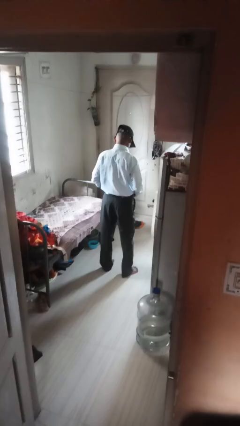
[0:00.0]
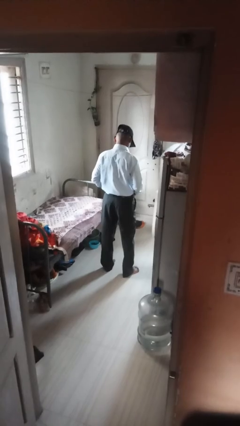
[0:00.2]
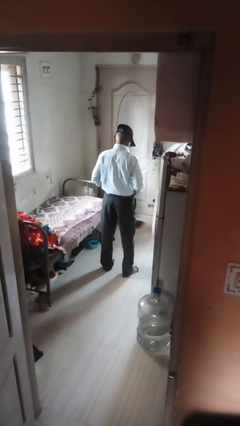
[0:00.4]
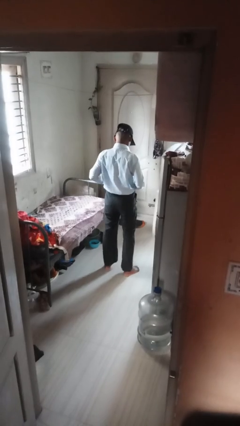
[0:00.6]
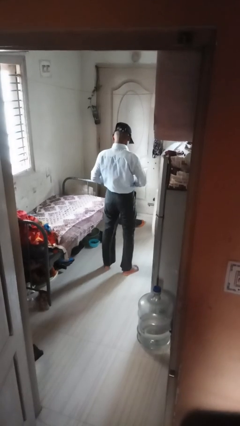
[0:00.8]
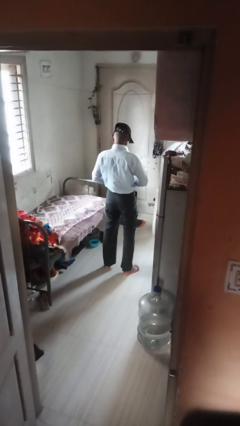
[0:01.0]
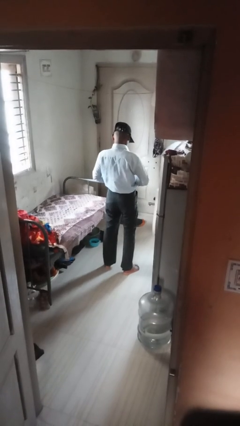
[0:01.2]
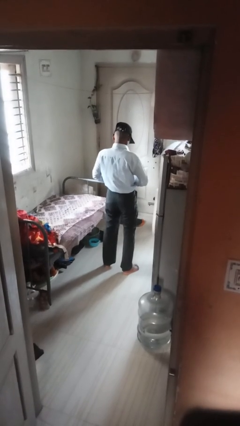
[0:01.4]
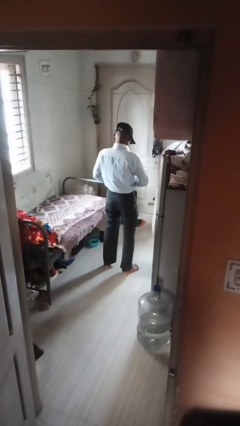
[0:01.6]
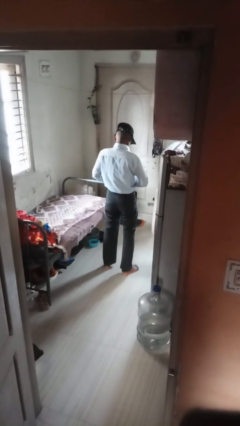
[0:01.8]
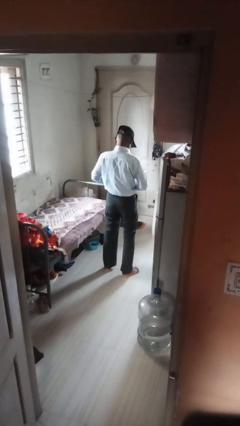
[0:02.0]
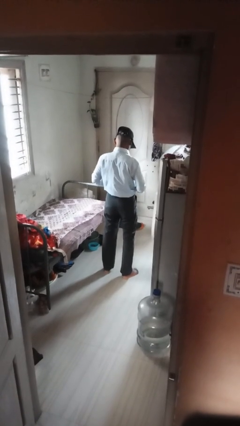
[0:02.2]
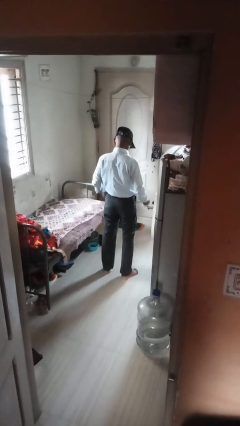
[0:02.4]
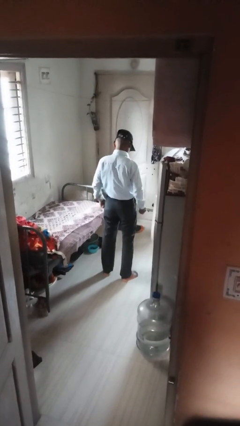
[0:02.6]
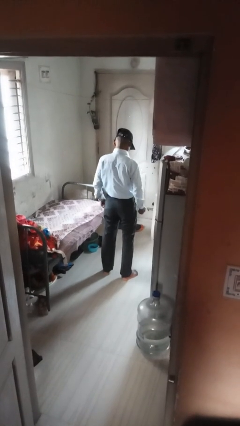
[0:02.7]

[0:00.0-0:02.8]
person hikes up pants

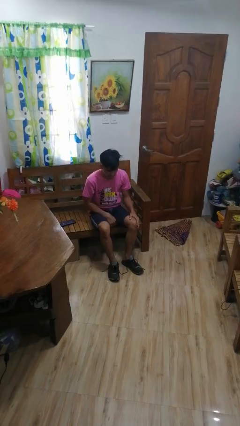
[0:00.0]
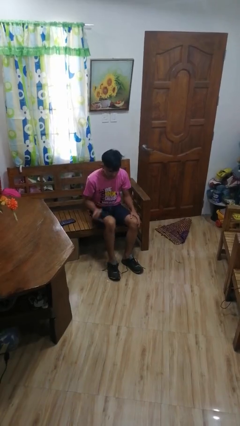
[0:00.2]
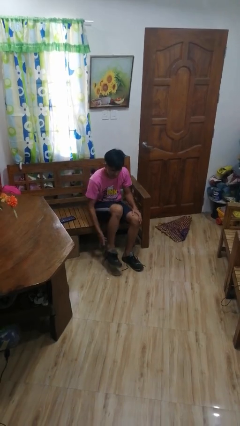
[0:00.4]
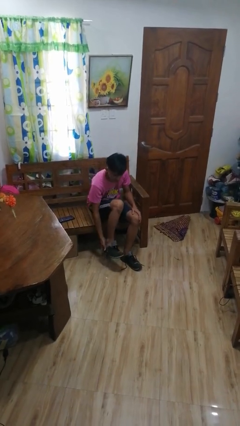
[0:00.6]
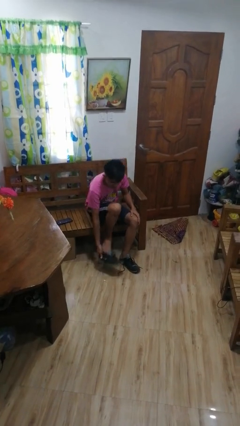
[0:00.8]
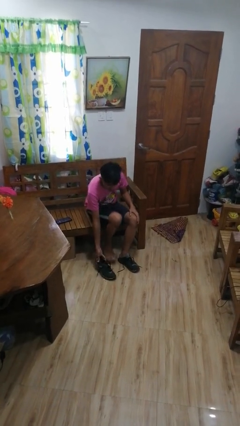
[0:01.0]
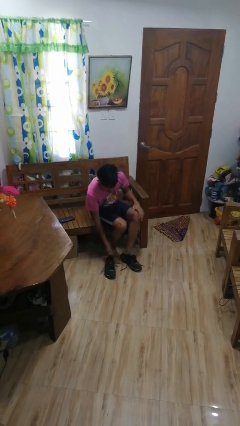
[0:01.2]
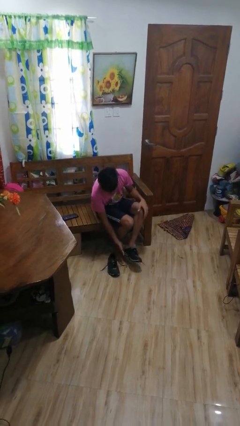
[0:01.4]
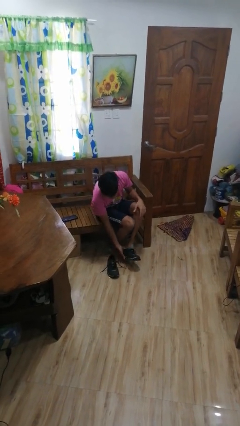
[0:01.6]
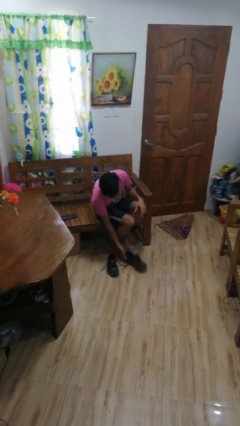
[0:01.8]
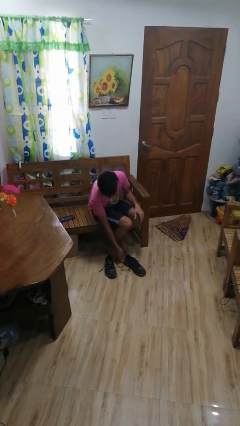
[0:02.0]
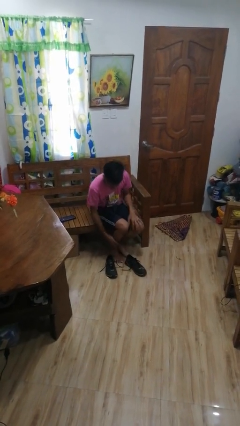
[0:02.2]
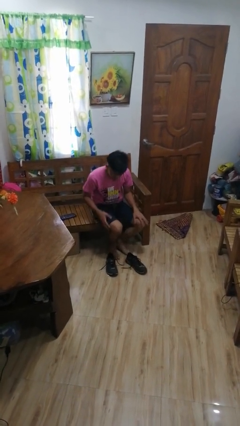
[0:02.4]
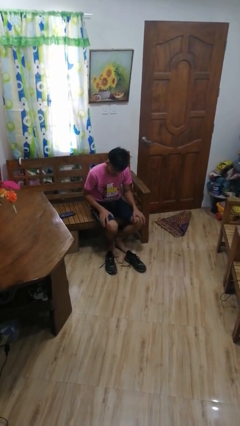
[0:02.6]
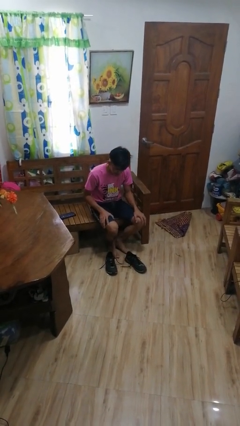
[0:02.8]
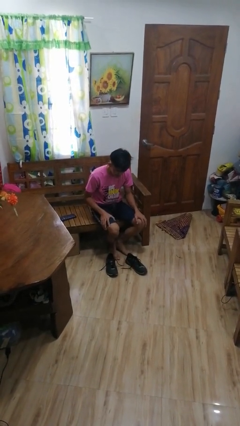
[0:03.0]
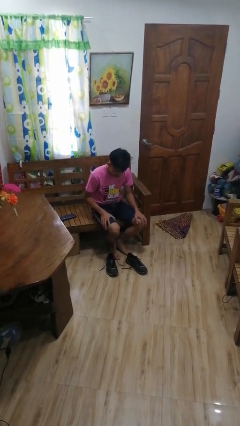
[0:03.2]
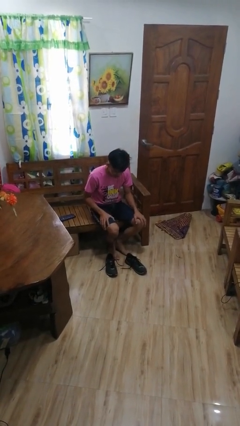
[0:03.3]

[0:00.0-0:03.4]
person takes off shoes

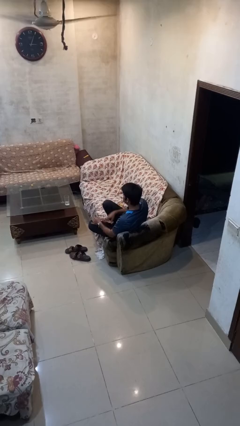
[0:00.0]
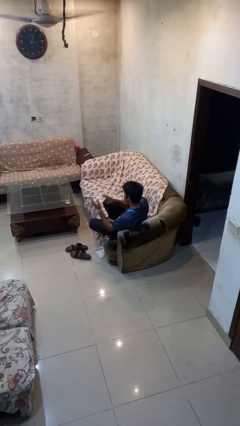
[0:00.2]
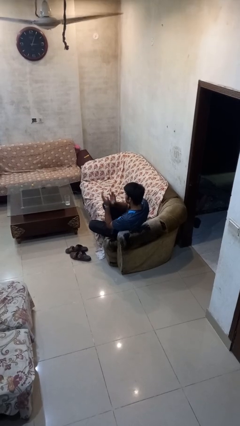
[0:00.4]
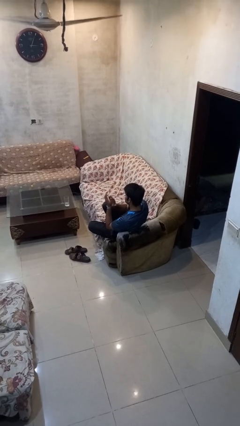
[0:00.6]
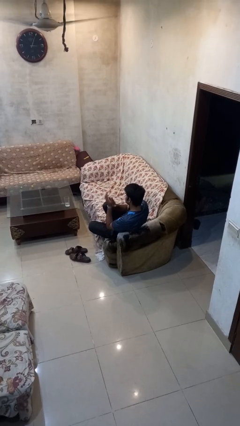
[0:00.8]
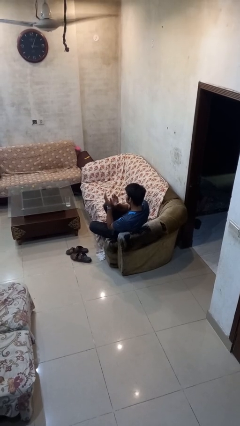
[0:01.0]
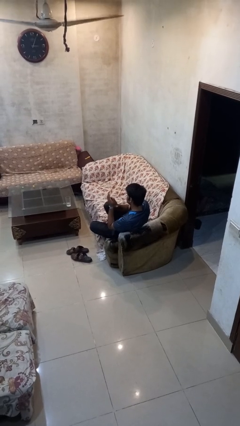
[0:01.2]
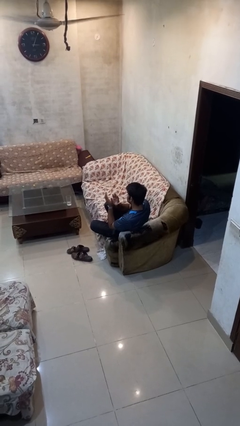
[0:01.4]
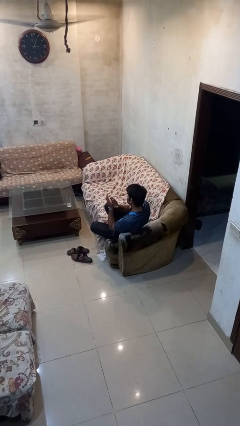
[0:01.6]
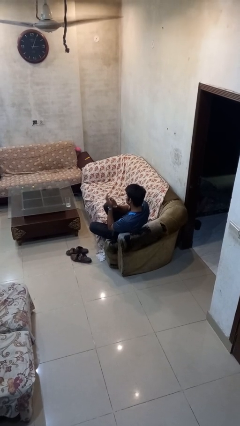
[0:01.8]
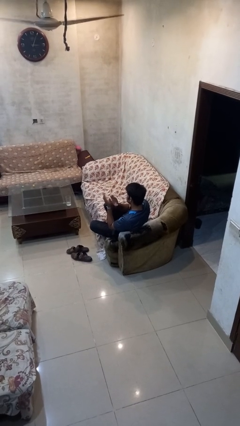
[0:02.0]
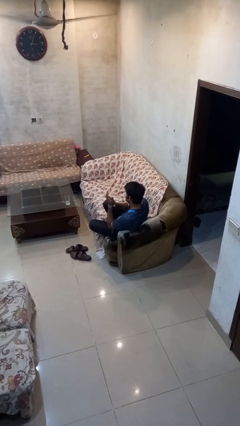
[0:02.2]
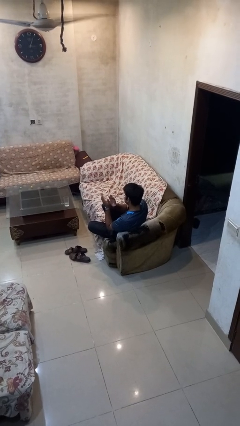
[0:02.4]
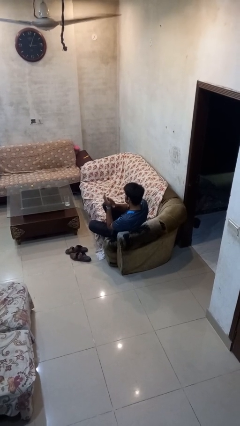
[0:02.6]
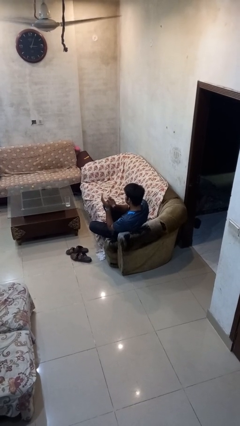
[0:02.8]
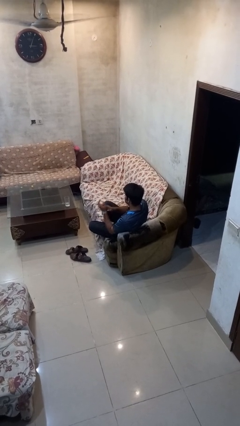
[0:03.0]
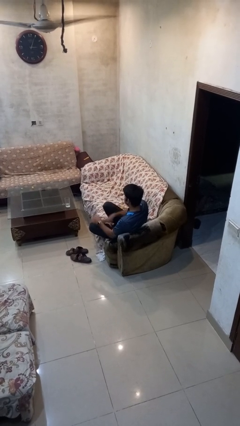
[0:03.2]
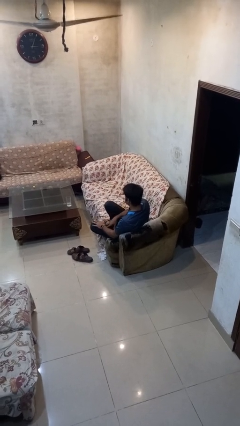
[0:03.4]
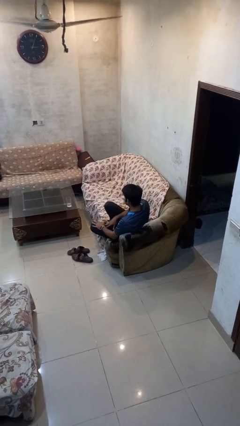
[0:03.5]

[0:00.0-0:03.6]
person claps hands

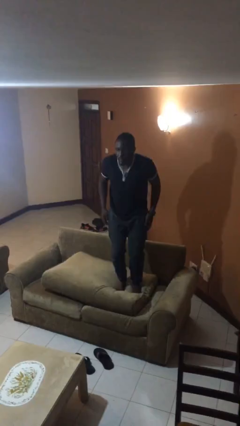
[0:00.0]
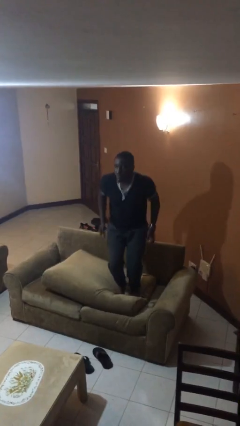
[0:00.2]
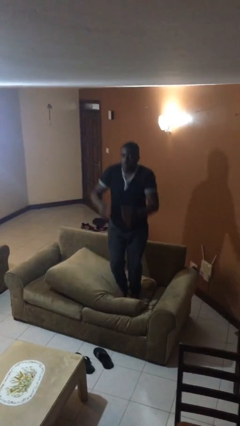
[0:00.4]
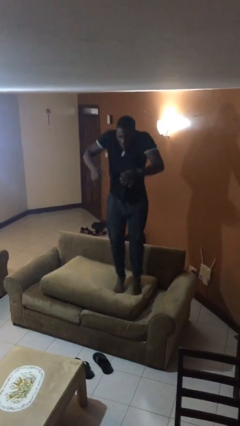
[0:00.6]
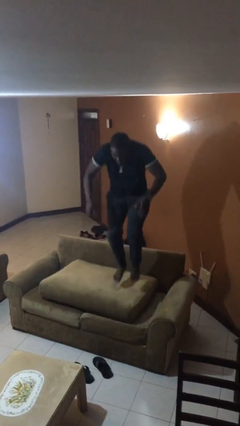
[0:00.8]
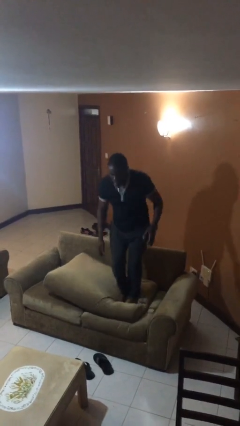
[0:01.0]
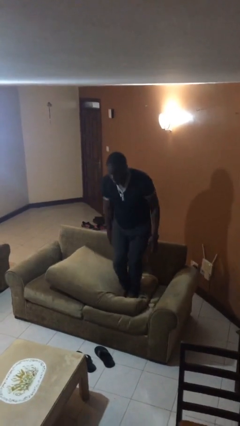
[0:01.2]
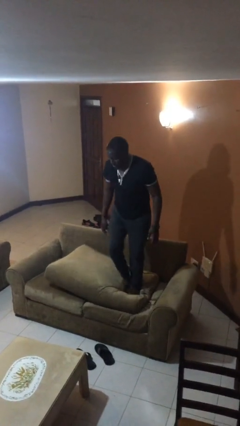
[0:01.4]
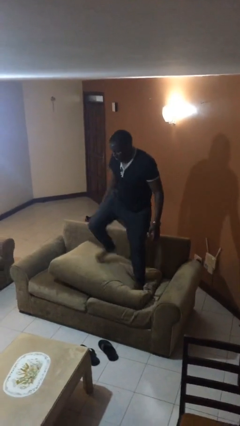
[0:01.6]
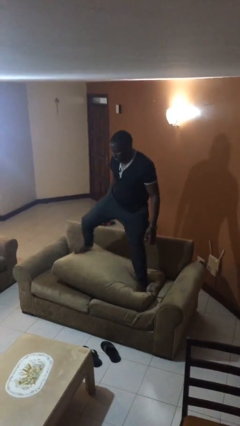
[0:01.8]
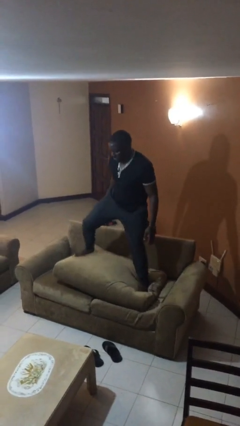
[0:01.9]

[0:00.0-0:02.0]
person jumps on couch

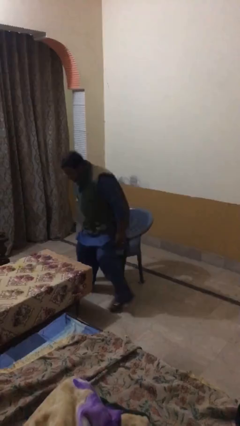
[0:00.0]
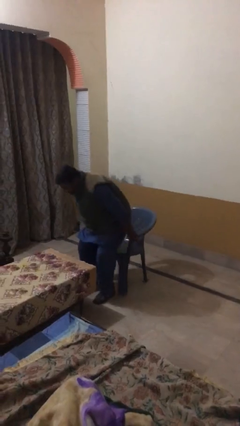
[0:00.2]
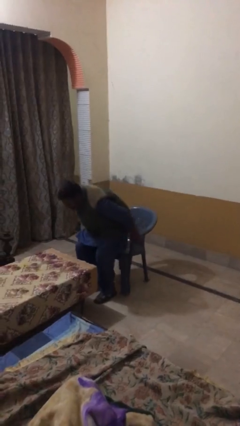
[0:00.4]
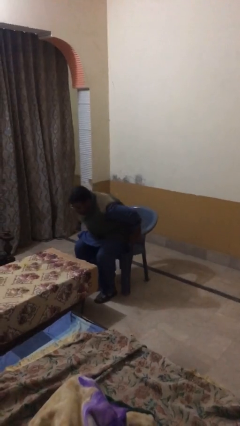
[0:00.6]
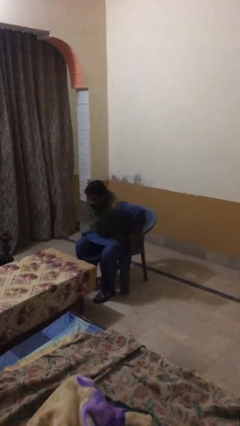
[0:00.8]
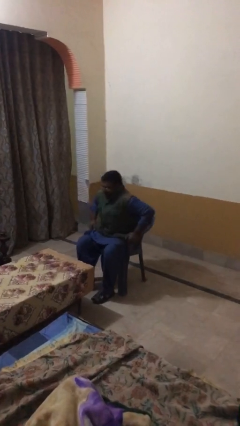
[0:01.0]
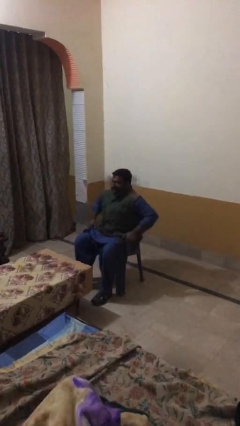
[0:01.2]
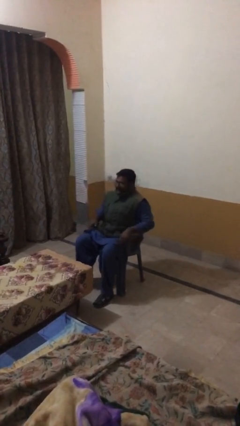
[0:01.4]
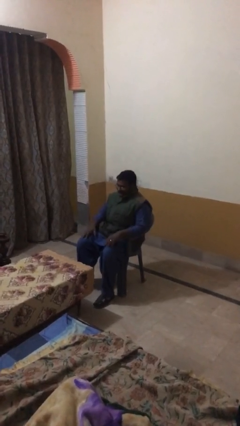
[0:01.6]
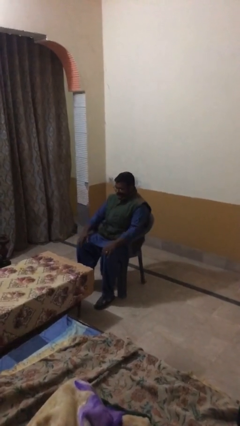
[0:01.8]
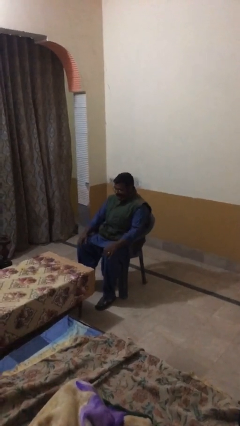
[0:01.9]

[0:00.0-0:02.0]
person sits down

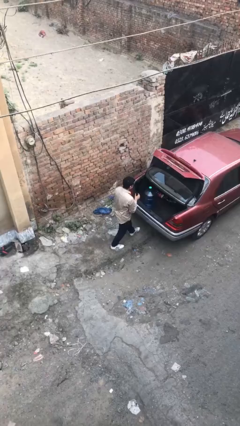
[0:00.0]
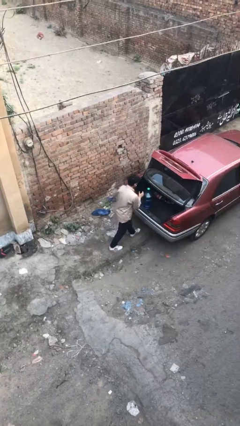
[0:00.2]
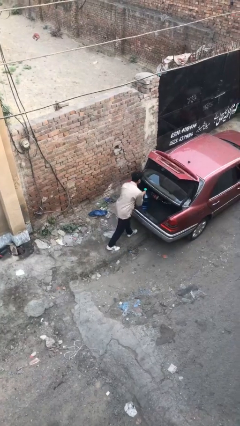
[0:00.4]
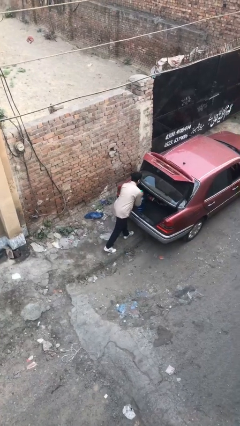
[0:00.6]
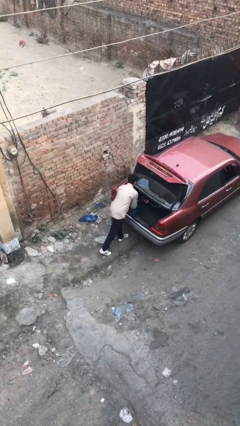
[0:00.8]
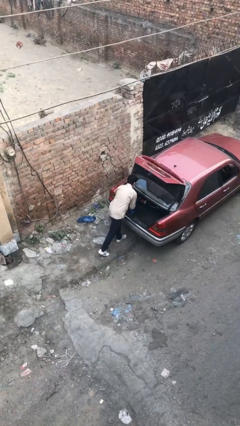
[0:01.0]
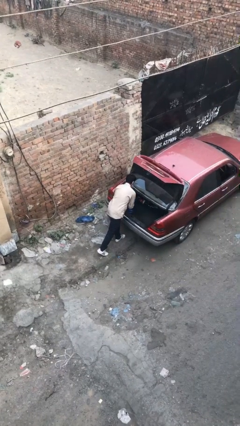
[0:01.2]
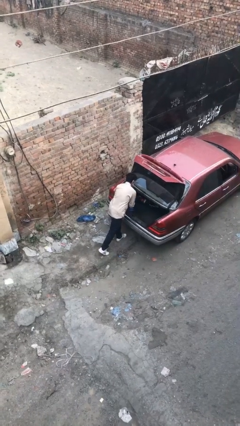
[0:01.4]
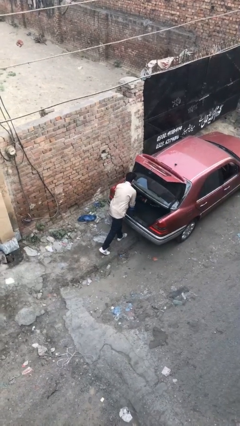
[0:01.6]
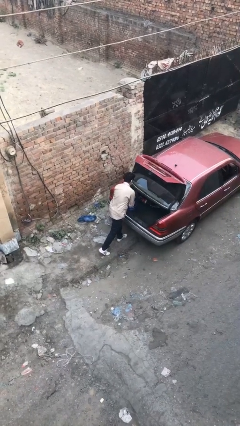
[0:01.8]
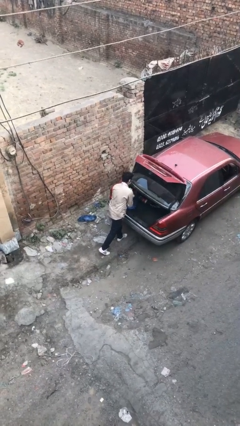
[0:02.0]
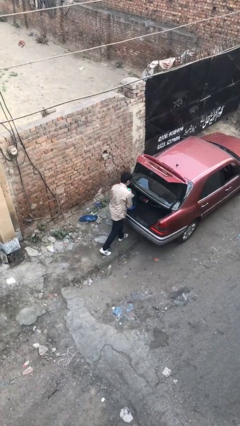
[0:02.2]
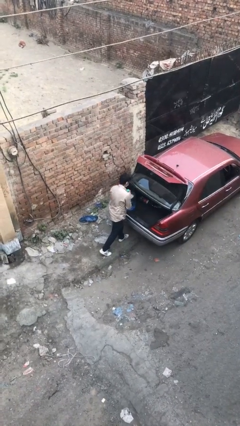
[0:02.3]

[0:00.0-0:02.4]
person unloads car

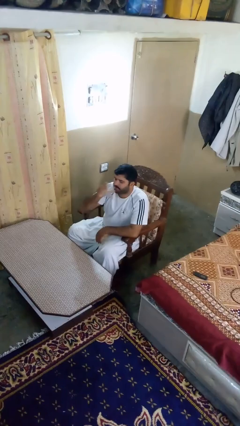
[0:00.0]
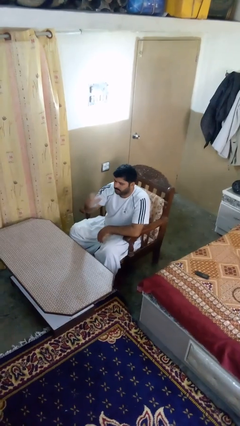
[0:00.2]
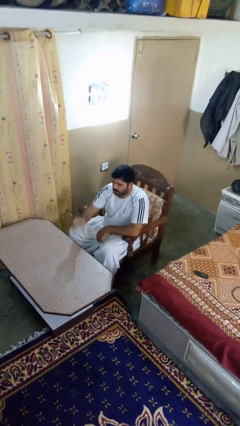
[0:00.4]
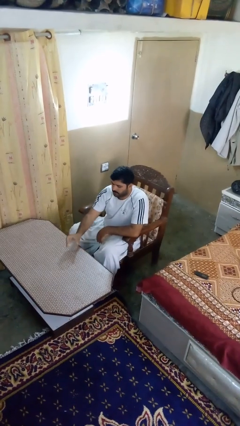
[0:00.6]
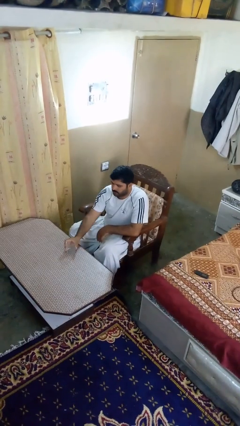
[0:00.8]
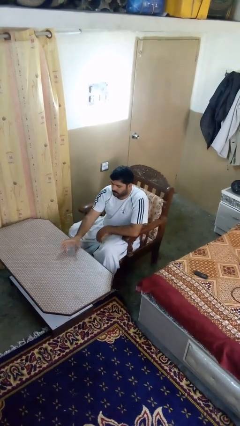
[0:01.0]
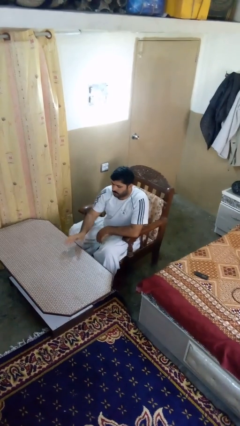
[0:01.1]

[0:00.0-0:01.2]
person puts down object on table
